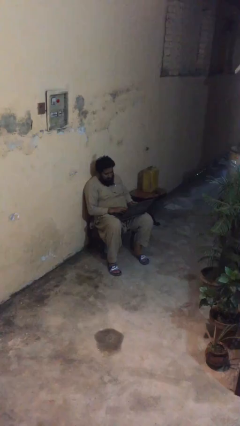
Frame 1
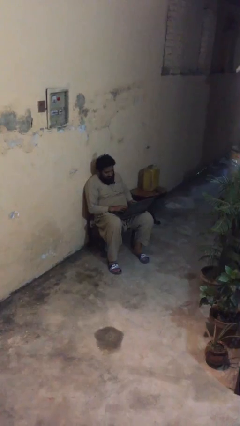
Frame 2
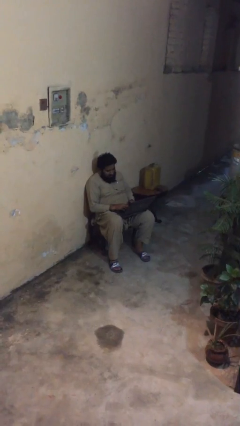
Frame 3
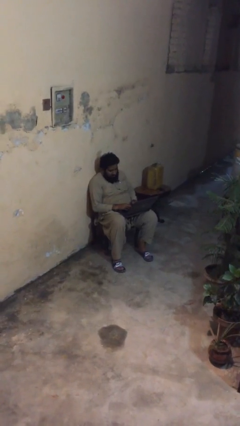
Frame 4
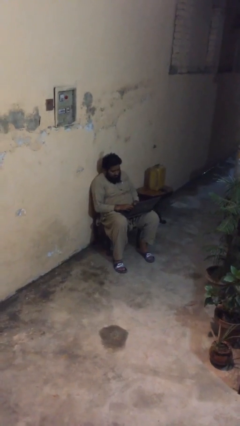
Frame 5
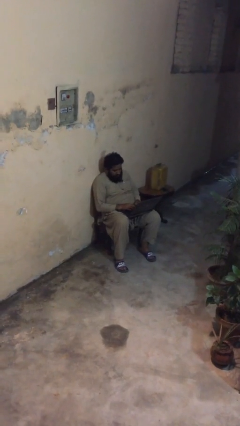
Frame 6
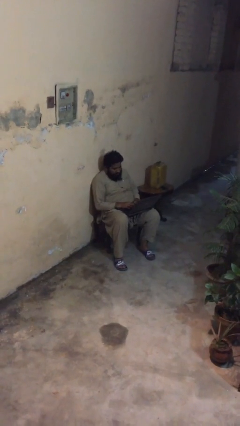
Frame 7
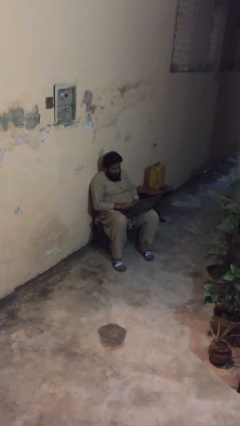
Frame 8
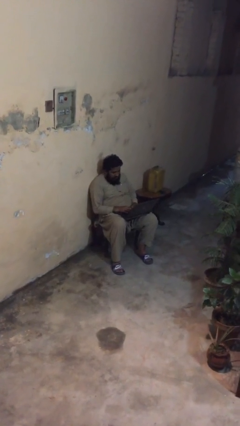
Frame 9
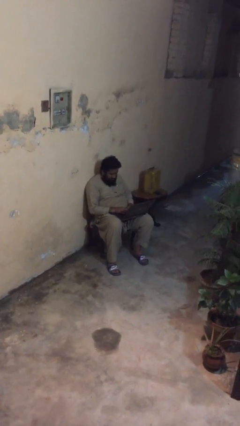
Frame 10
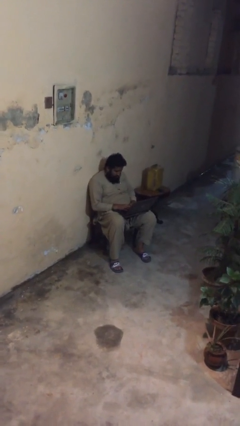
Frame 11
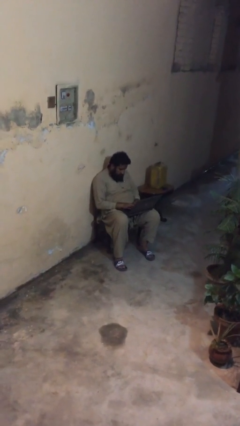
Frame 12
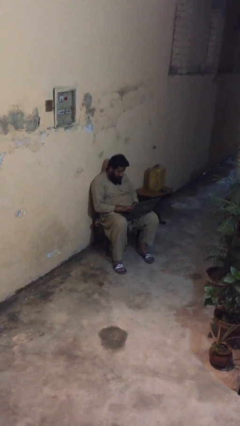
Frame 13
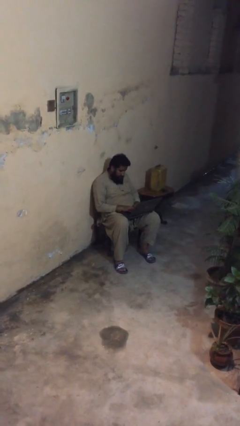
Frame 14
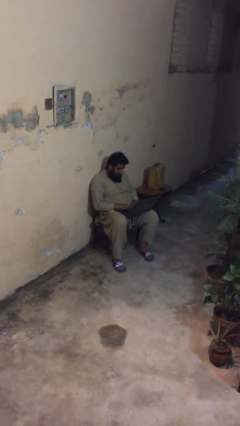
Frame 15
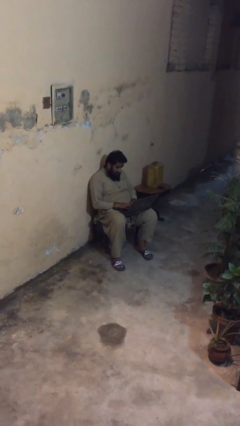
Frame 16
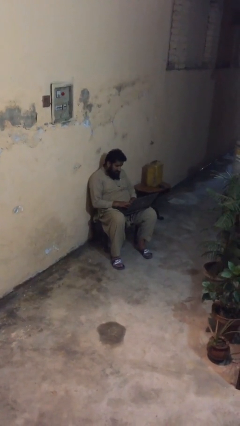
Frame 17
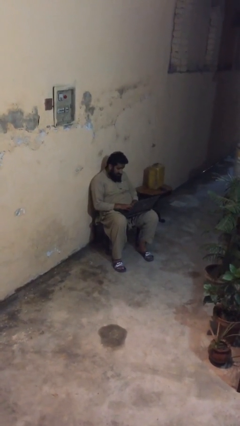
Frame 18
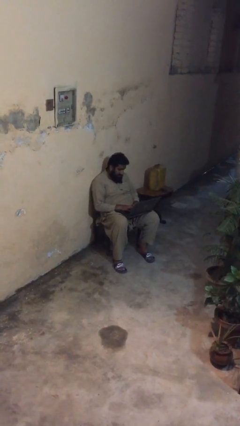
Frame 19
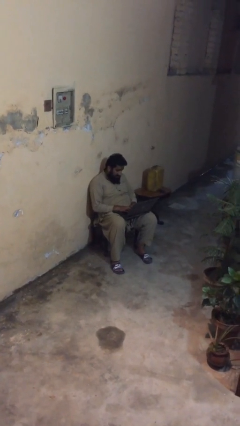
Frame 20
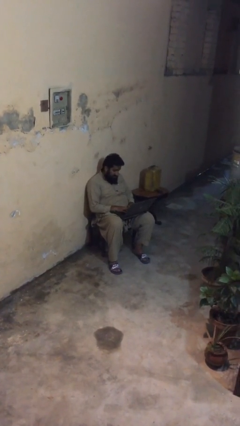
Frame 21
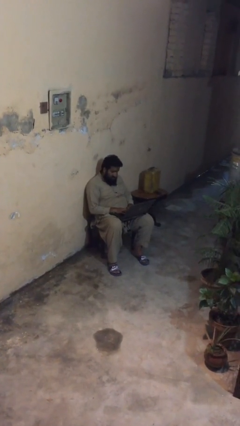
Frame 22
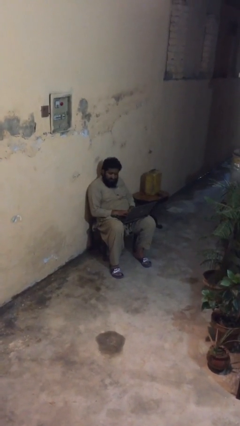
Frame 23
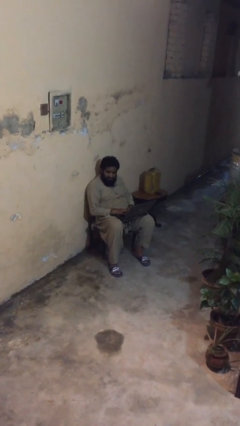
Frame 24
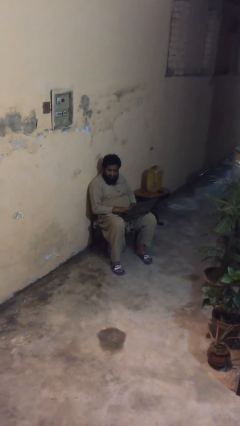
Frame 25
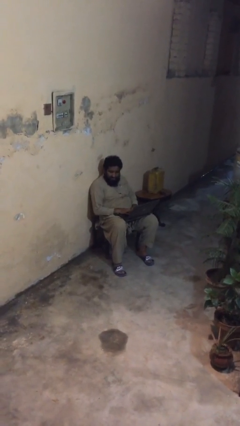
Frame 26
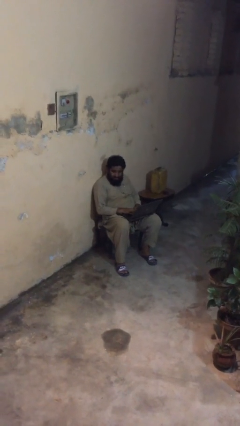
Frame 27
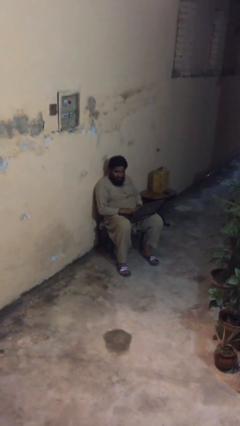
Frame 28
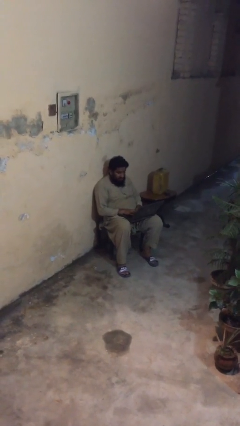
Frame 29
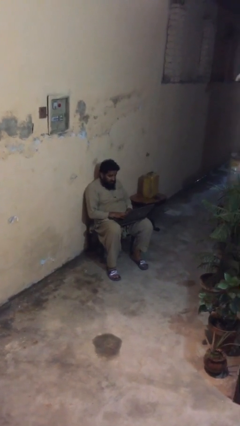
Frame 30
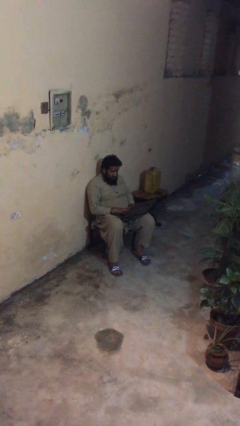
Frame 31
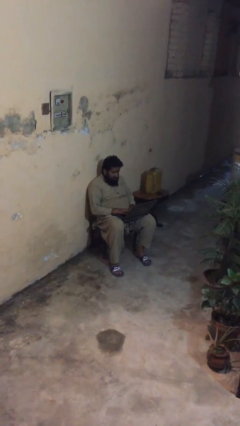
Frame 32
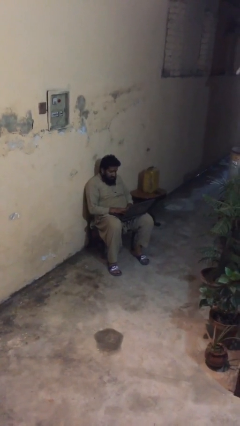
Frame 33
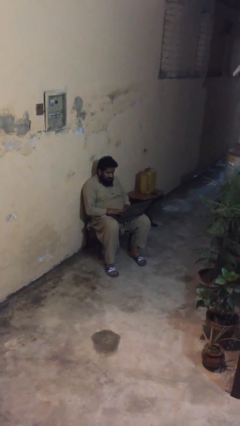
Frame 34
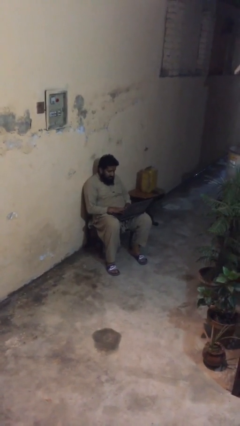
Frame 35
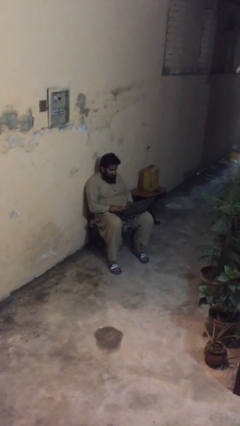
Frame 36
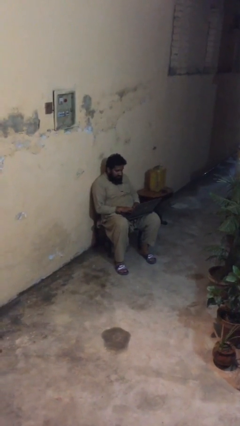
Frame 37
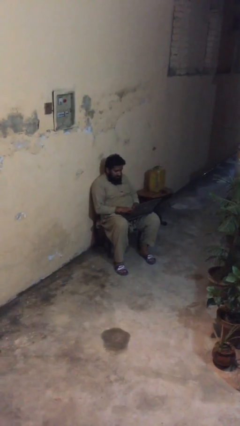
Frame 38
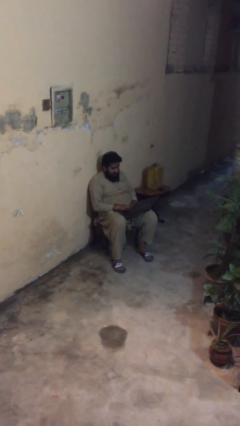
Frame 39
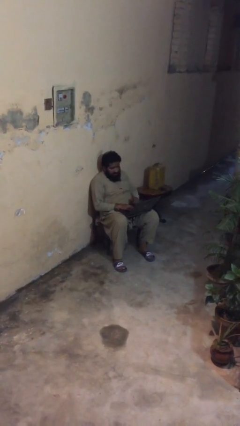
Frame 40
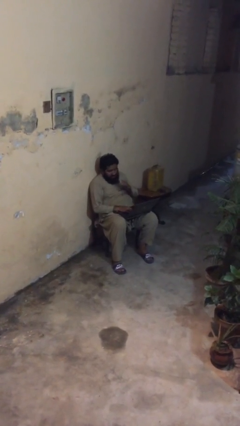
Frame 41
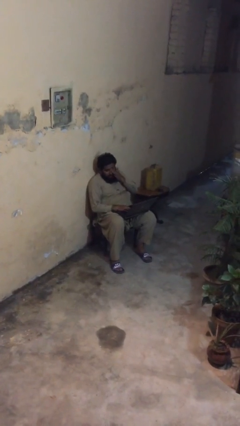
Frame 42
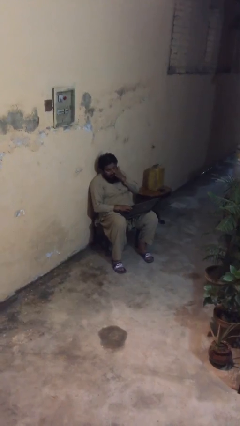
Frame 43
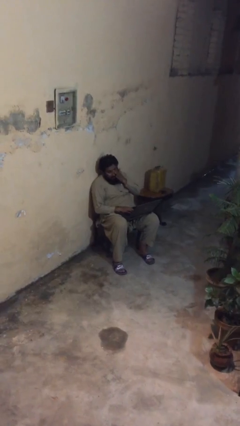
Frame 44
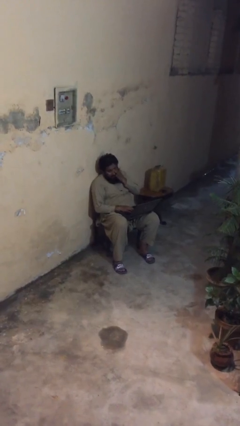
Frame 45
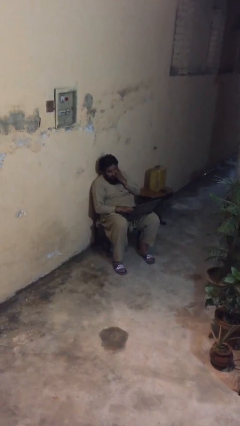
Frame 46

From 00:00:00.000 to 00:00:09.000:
person interacts with laptop

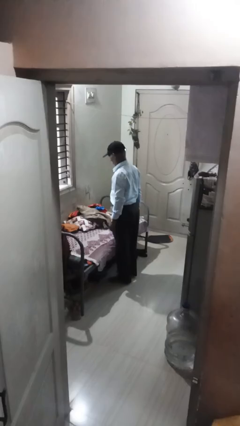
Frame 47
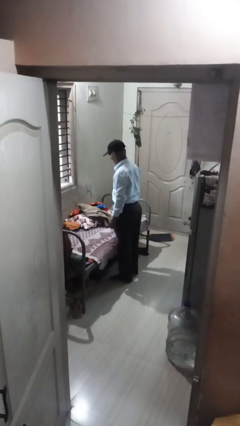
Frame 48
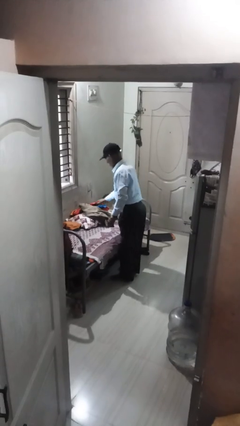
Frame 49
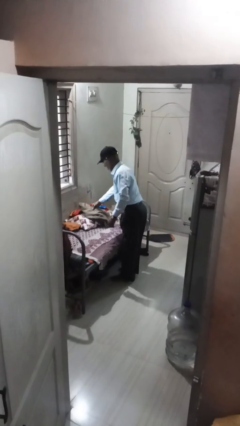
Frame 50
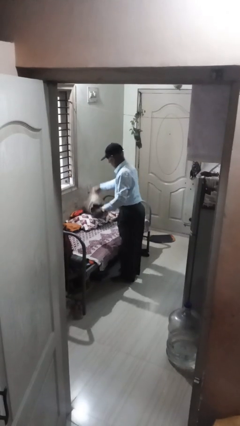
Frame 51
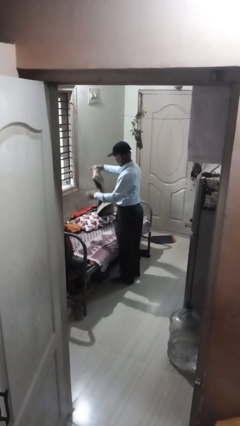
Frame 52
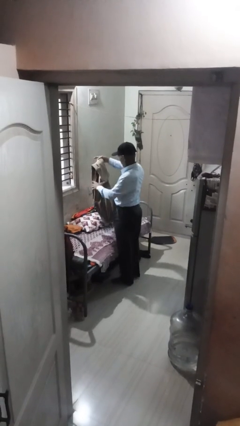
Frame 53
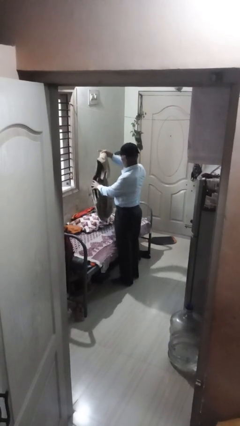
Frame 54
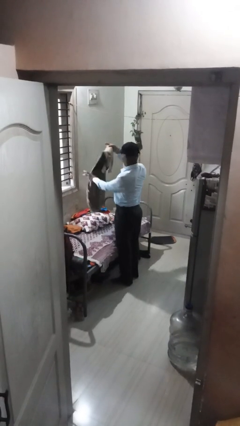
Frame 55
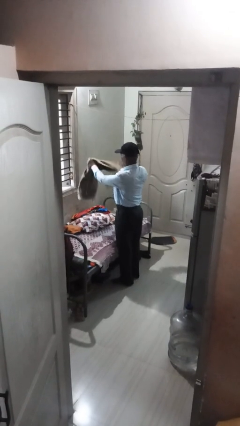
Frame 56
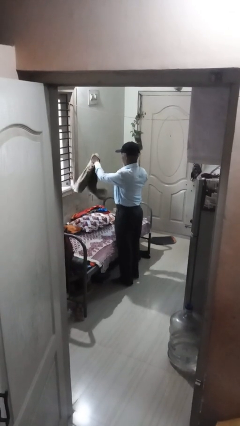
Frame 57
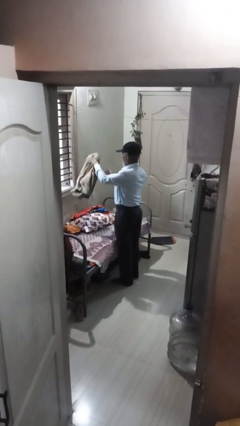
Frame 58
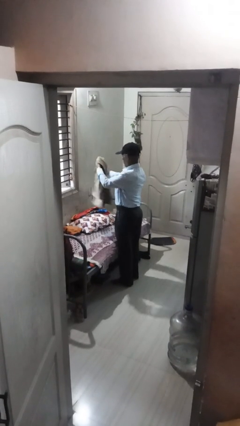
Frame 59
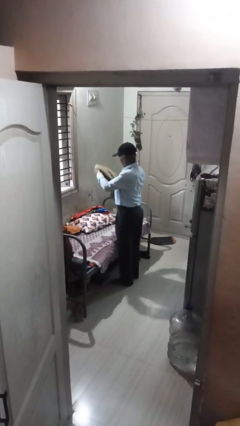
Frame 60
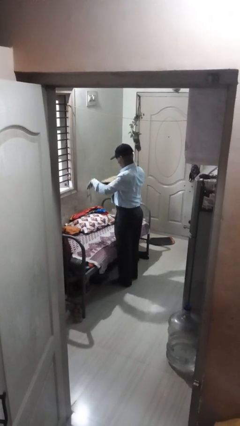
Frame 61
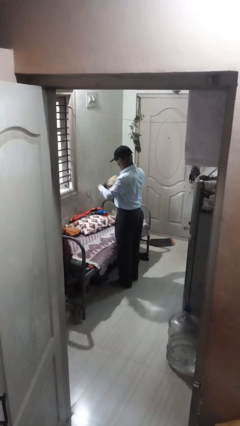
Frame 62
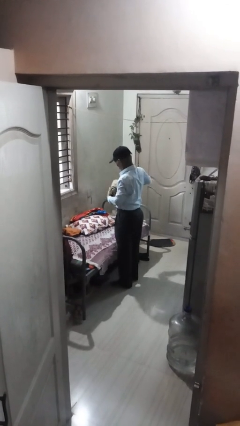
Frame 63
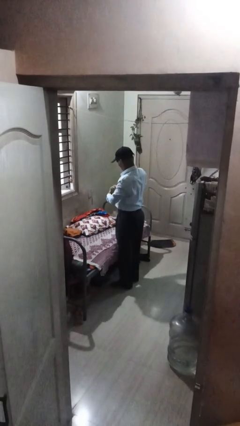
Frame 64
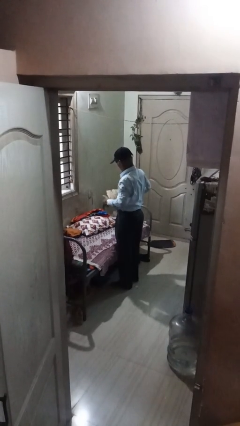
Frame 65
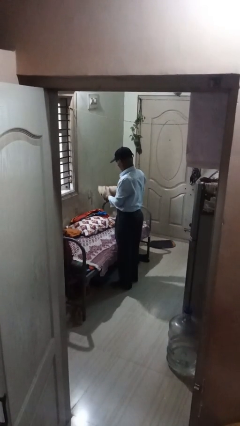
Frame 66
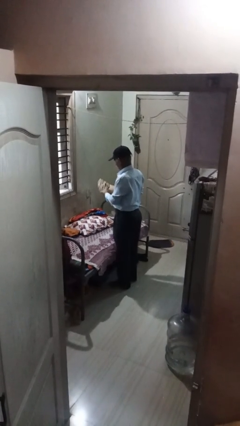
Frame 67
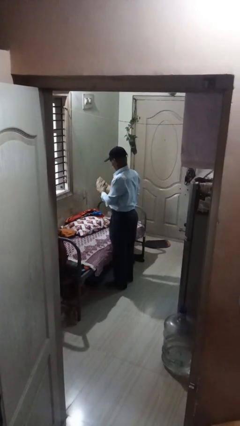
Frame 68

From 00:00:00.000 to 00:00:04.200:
person folds pants

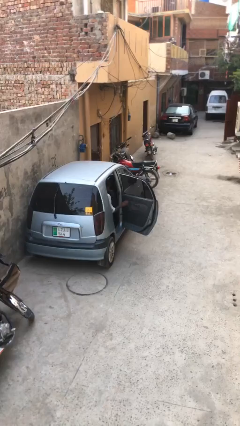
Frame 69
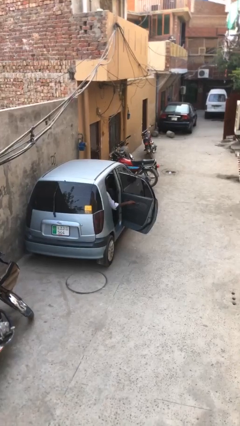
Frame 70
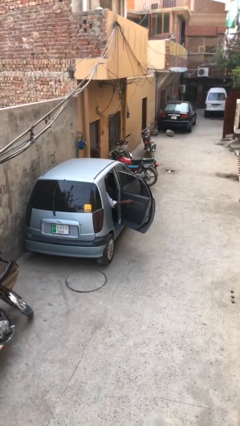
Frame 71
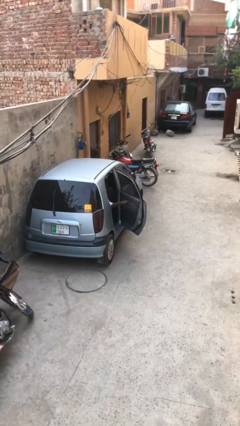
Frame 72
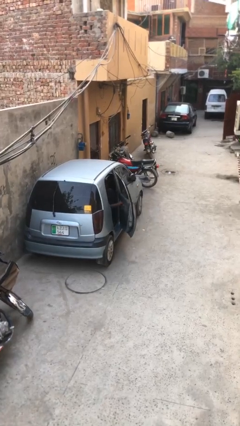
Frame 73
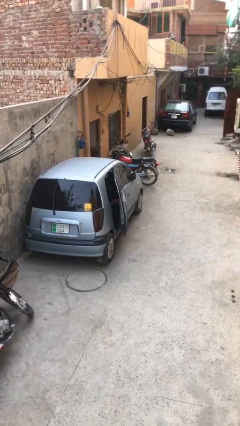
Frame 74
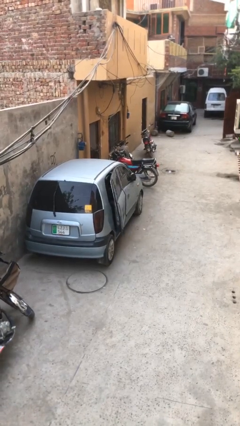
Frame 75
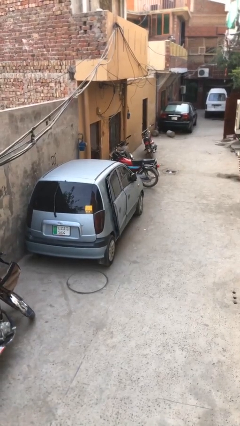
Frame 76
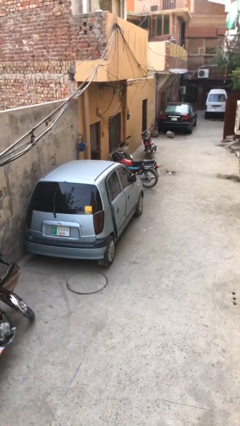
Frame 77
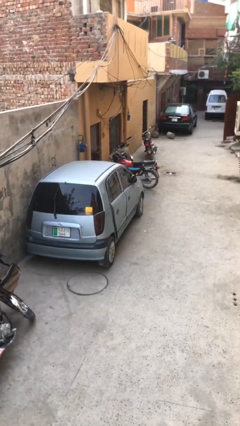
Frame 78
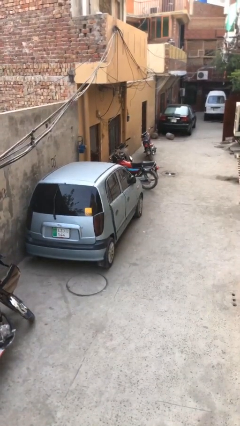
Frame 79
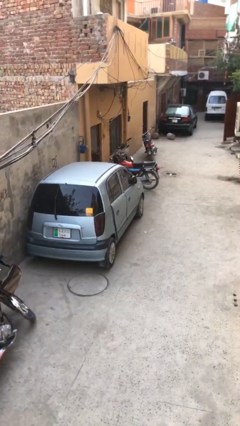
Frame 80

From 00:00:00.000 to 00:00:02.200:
person closes car door

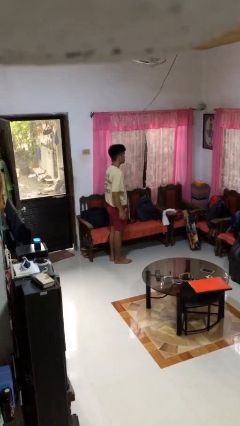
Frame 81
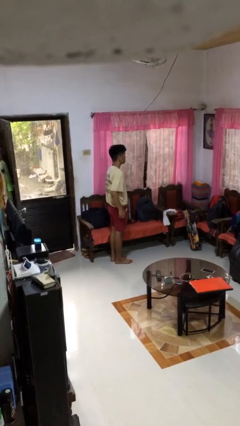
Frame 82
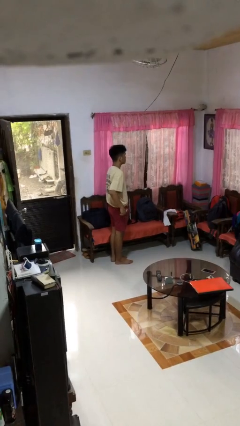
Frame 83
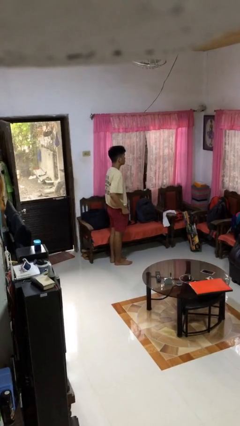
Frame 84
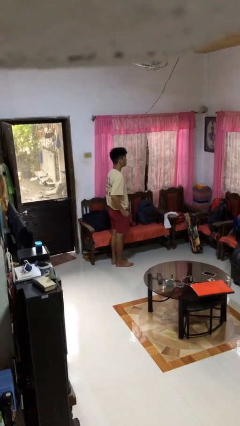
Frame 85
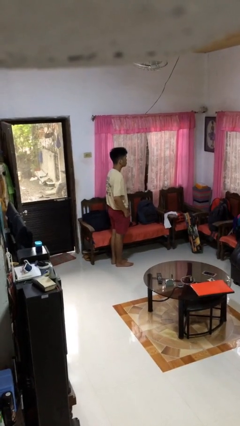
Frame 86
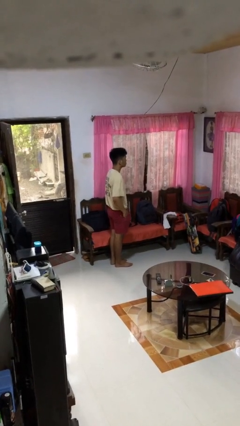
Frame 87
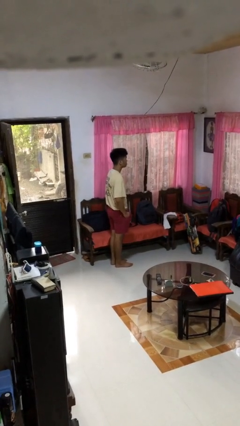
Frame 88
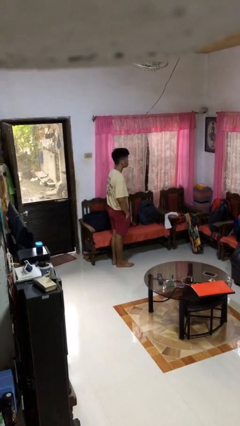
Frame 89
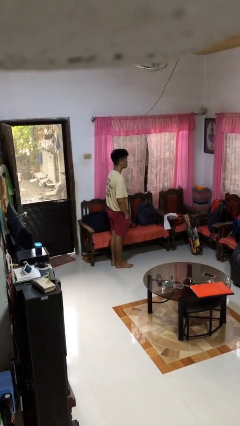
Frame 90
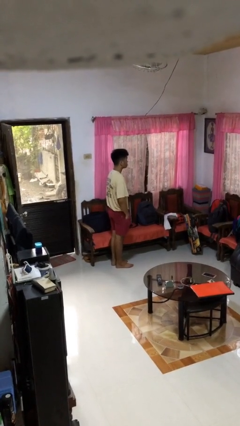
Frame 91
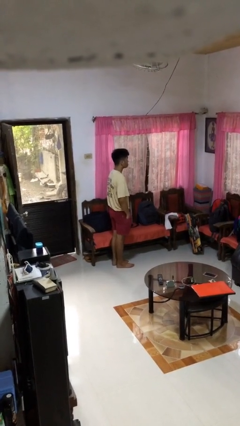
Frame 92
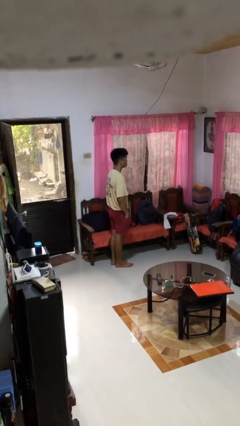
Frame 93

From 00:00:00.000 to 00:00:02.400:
person puts hands in back pockets

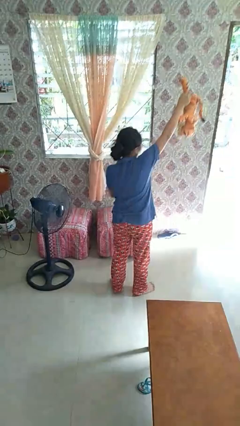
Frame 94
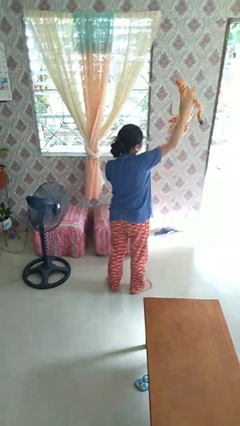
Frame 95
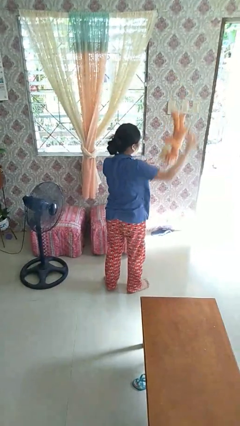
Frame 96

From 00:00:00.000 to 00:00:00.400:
person drops object
